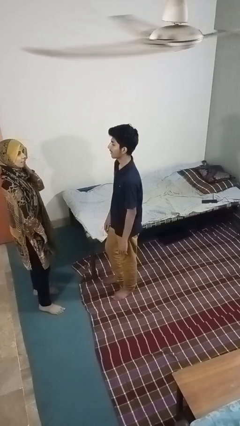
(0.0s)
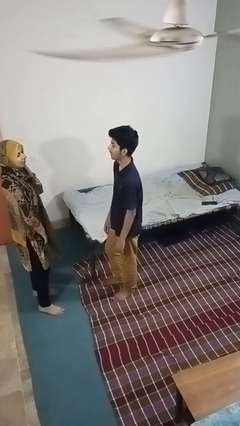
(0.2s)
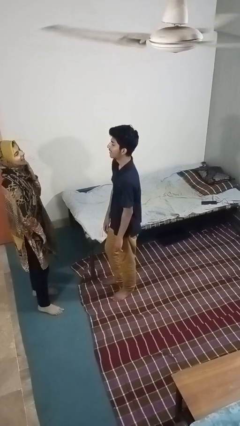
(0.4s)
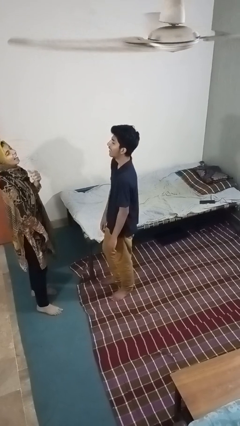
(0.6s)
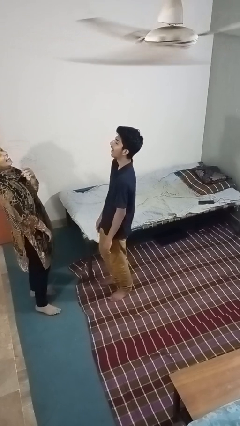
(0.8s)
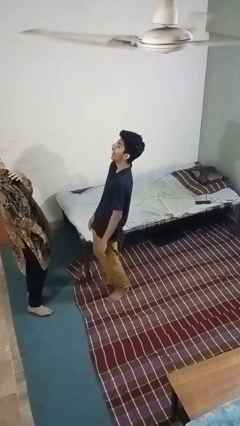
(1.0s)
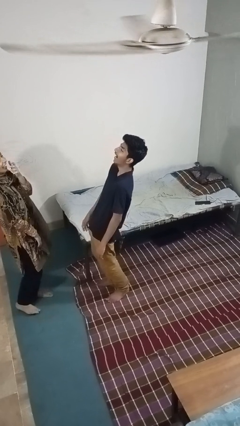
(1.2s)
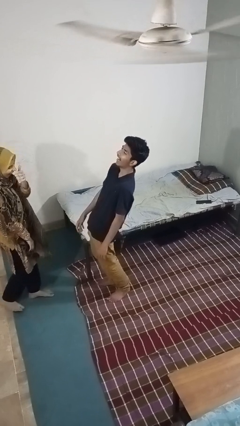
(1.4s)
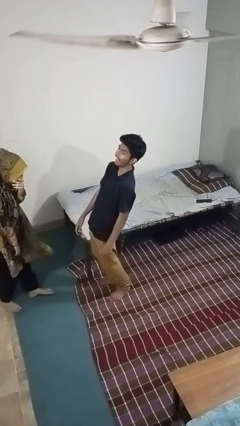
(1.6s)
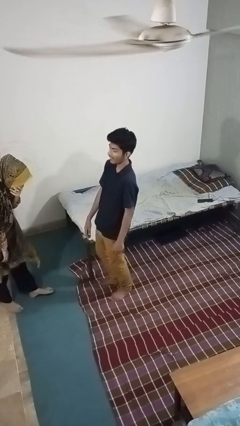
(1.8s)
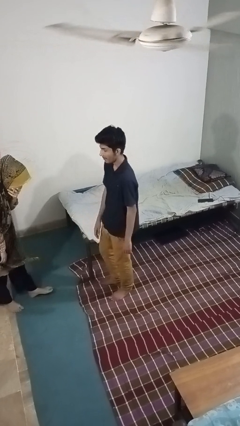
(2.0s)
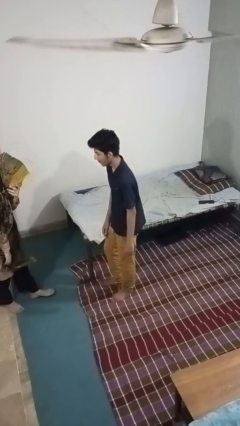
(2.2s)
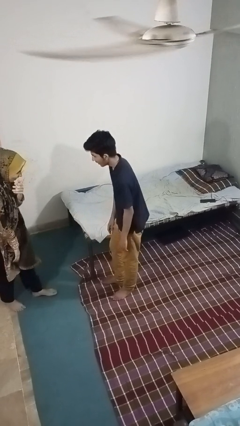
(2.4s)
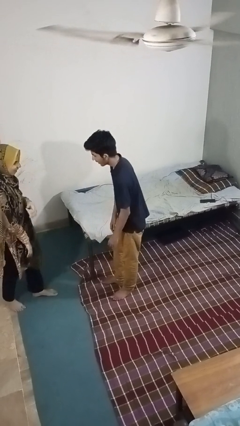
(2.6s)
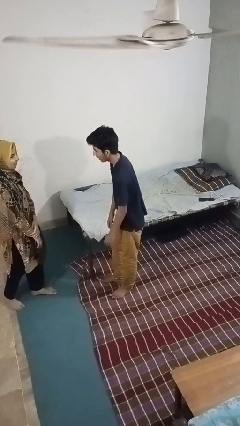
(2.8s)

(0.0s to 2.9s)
person laughs with person

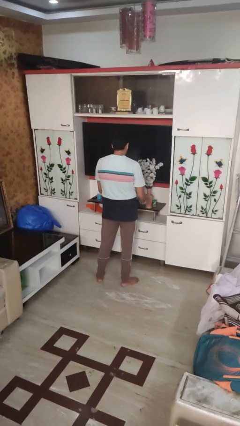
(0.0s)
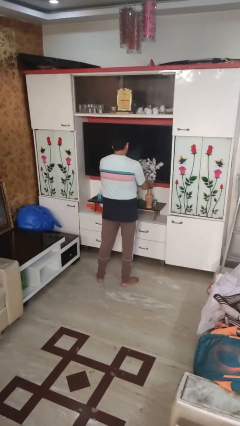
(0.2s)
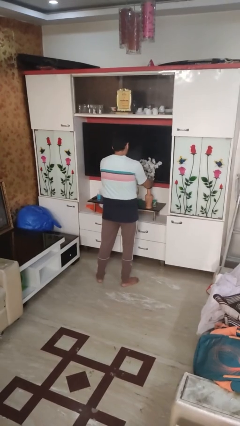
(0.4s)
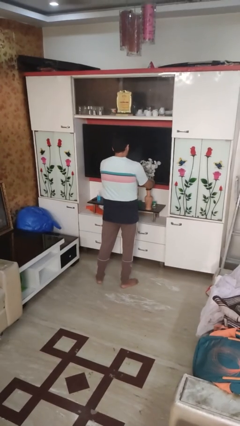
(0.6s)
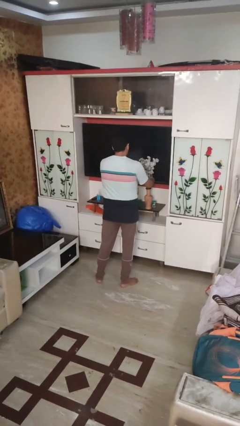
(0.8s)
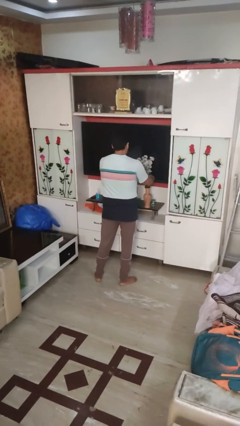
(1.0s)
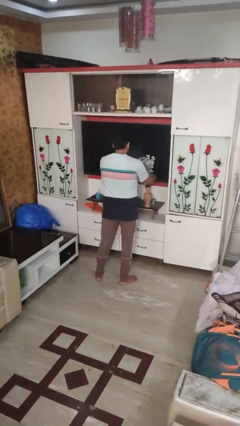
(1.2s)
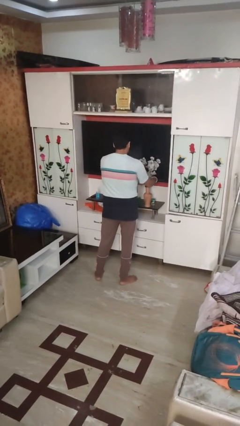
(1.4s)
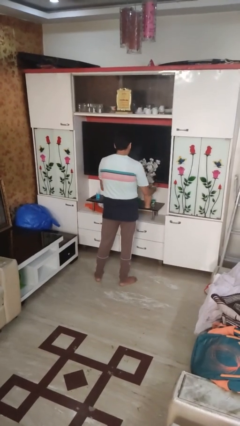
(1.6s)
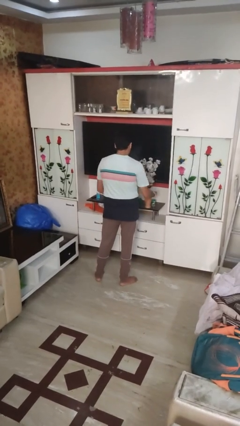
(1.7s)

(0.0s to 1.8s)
person arranges flowers in vase

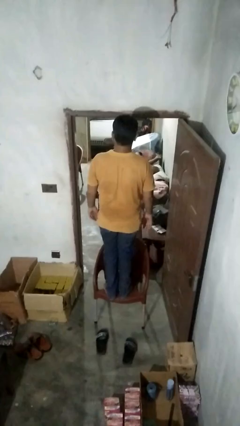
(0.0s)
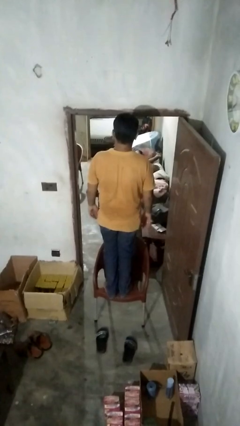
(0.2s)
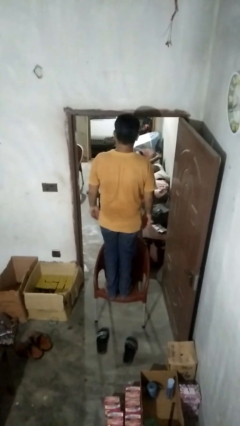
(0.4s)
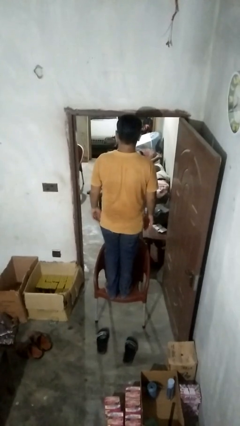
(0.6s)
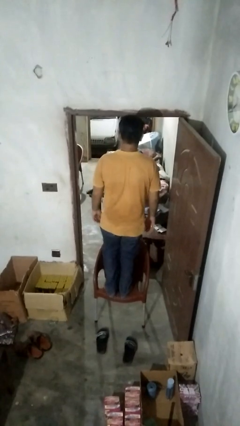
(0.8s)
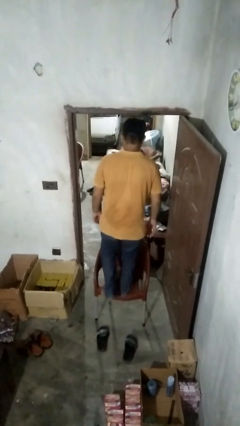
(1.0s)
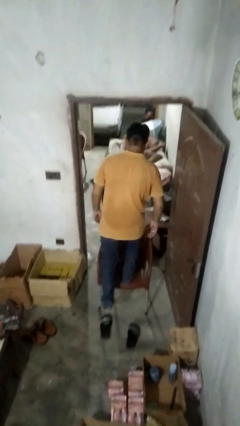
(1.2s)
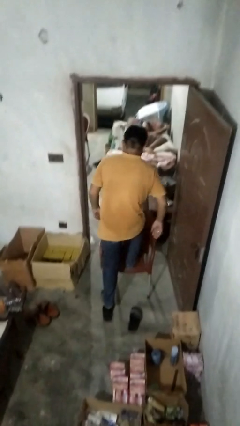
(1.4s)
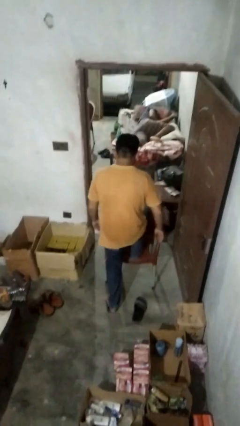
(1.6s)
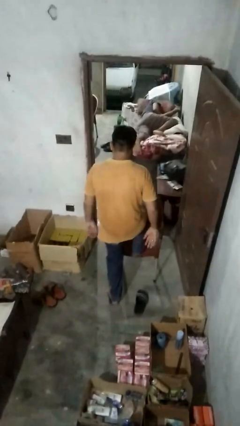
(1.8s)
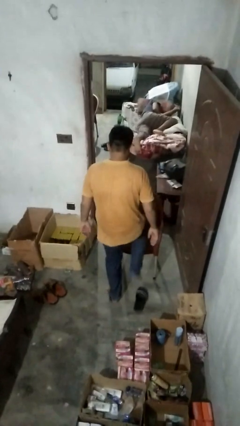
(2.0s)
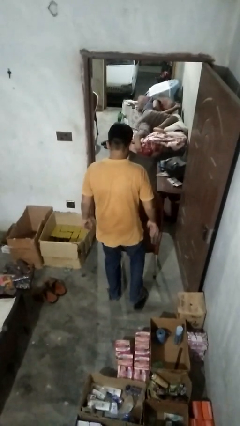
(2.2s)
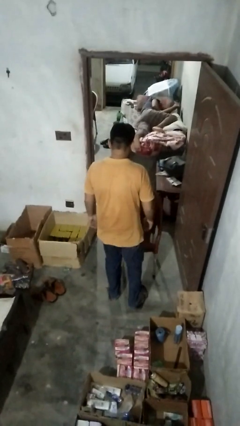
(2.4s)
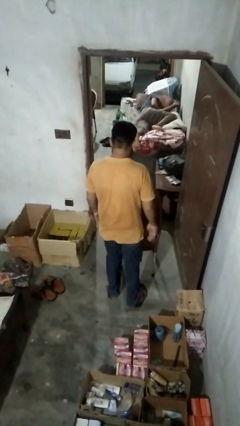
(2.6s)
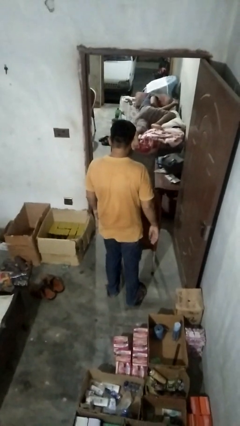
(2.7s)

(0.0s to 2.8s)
person climbs off chair

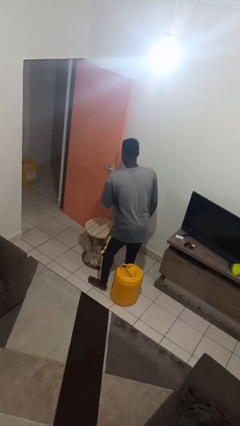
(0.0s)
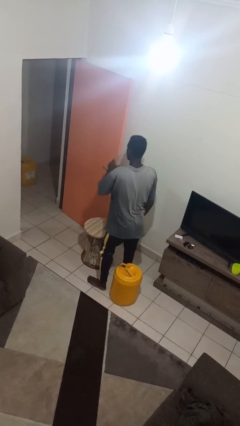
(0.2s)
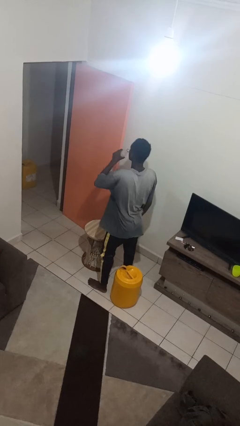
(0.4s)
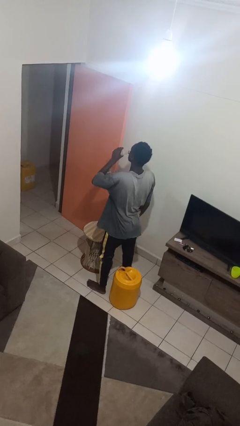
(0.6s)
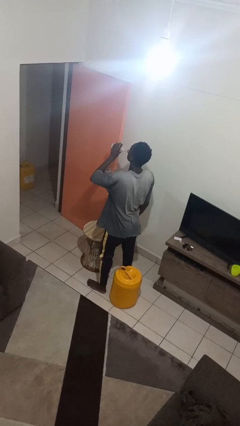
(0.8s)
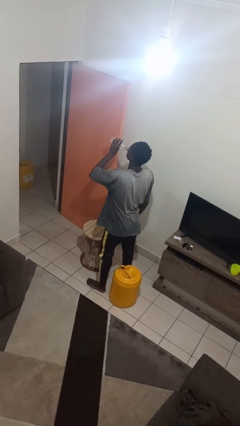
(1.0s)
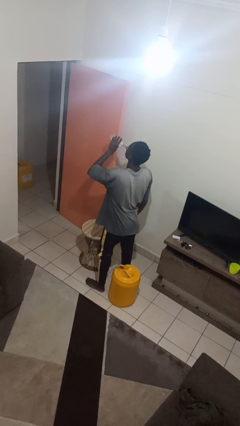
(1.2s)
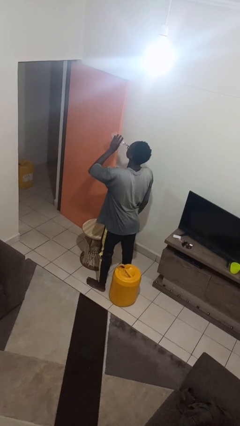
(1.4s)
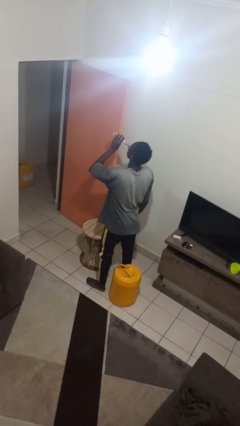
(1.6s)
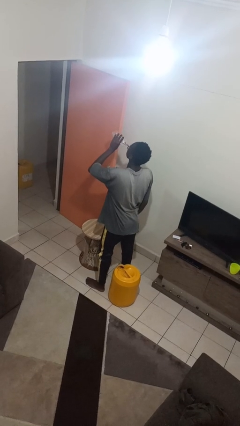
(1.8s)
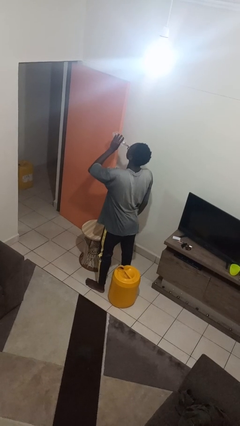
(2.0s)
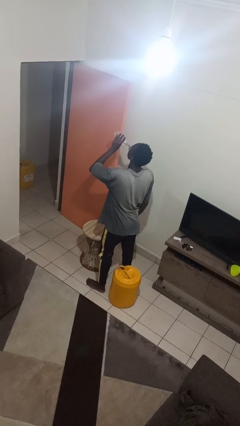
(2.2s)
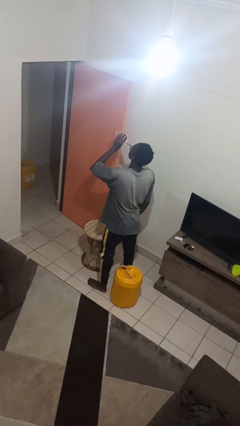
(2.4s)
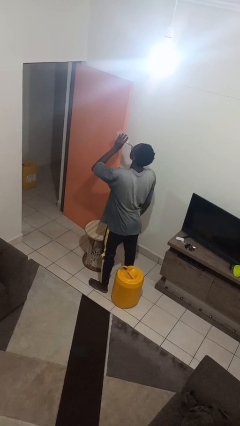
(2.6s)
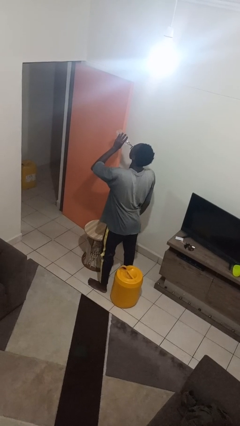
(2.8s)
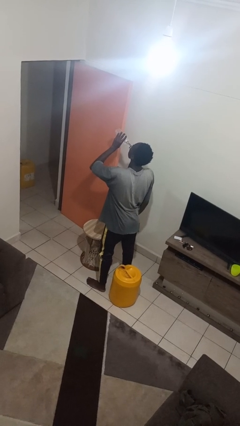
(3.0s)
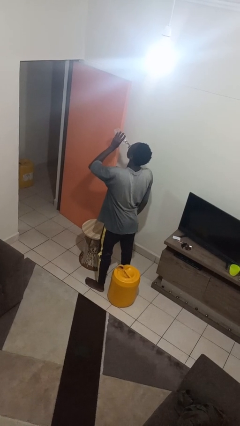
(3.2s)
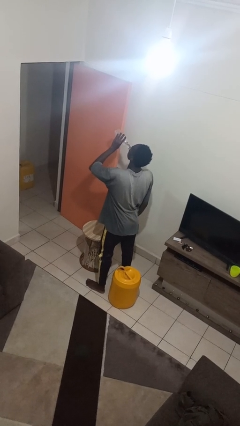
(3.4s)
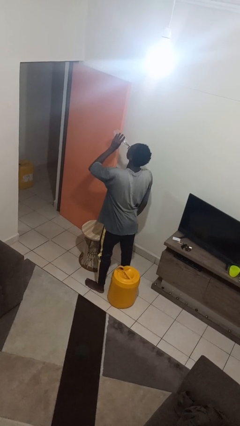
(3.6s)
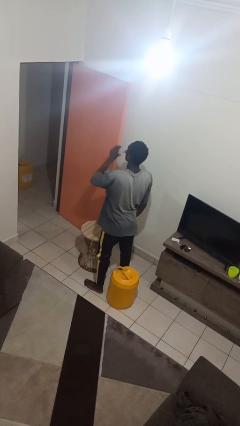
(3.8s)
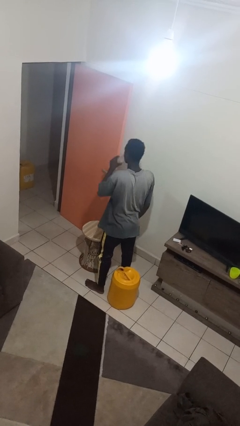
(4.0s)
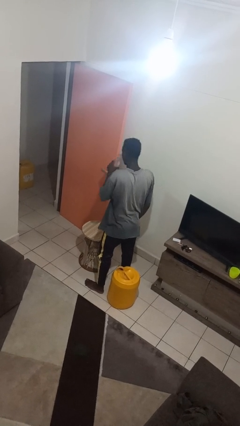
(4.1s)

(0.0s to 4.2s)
person drinks from bottle

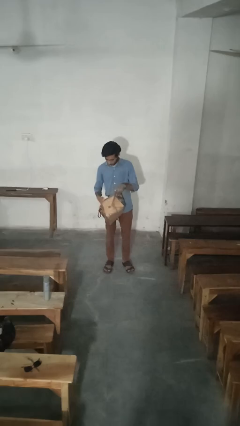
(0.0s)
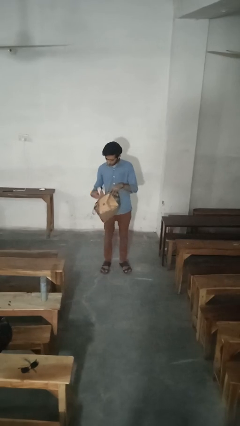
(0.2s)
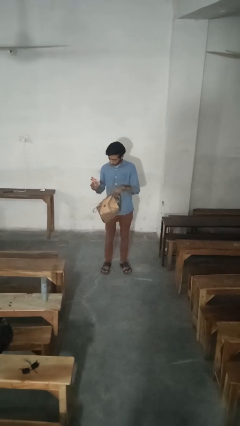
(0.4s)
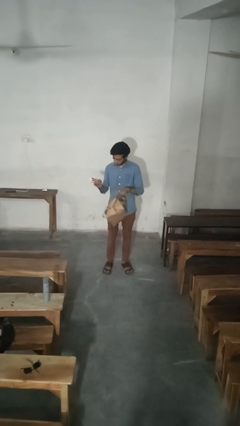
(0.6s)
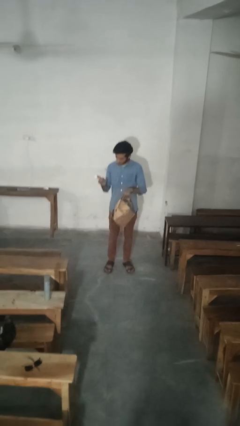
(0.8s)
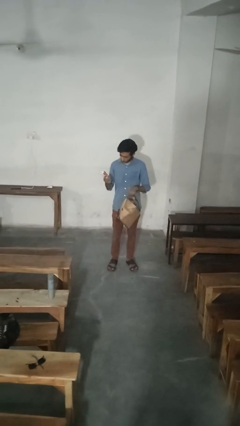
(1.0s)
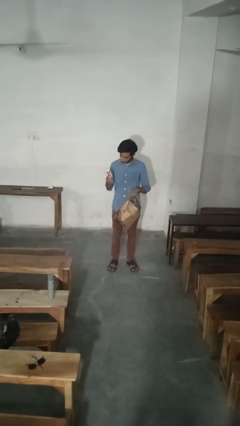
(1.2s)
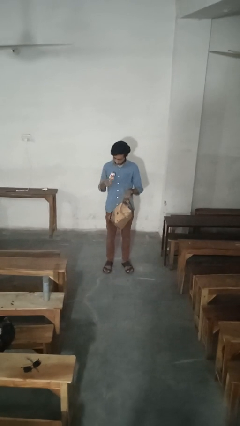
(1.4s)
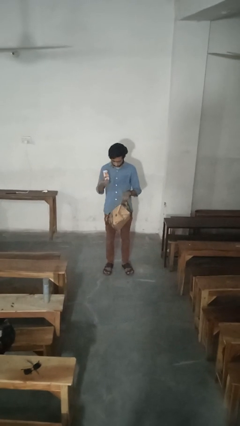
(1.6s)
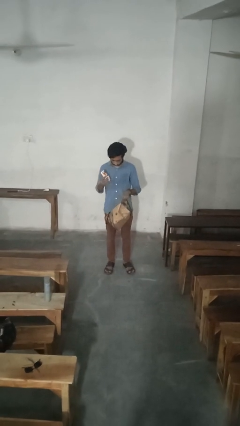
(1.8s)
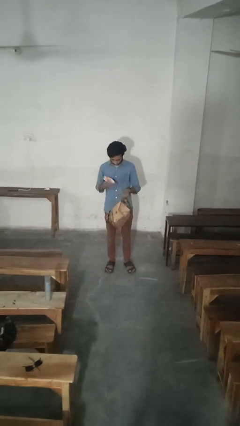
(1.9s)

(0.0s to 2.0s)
person takes object from purse

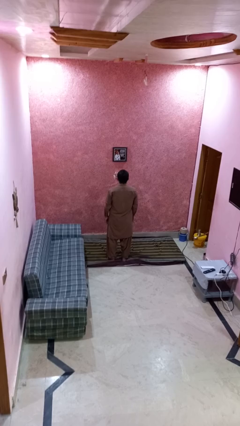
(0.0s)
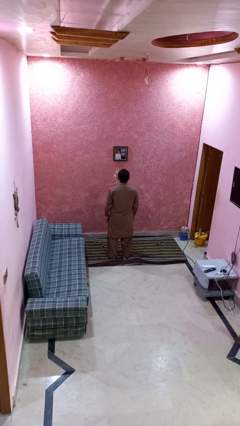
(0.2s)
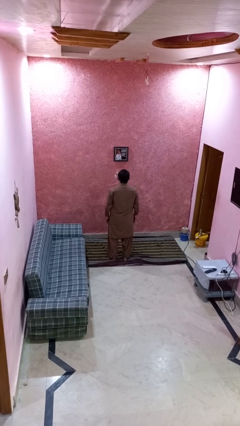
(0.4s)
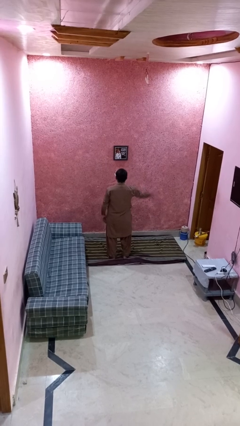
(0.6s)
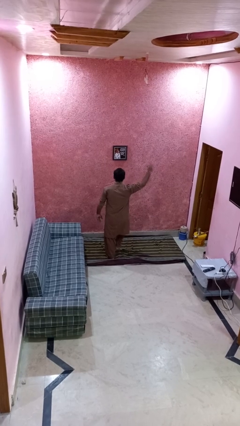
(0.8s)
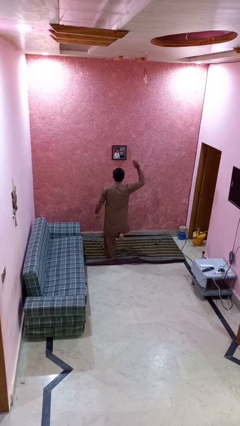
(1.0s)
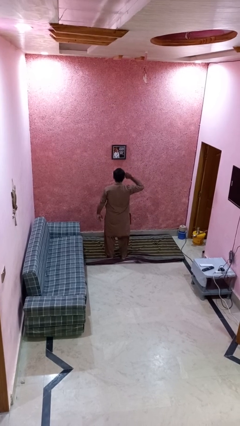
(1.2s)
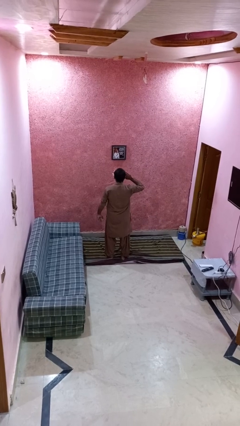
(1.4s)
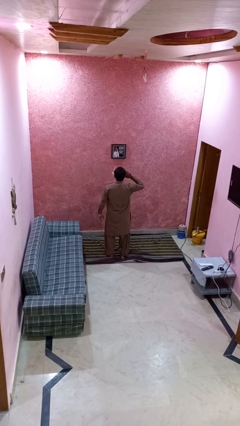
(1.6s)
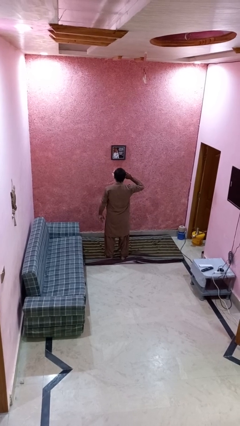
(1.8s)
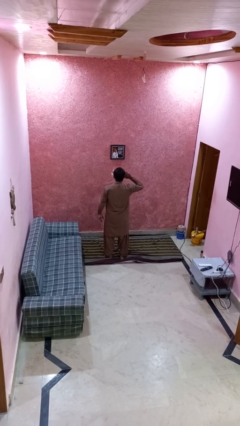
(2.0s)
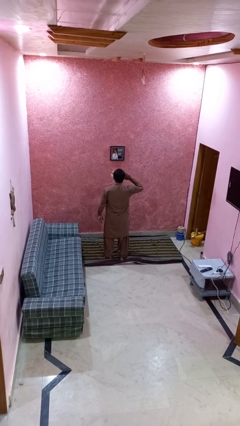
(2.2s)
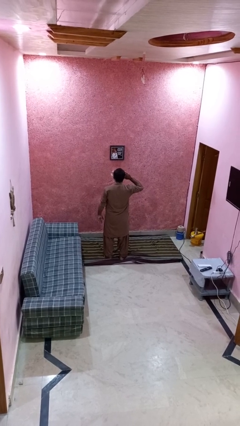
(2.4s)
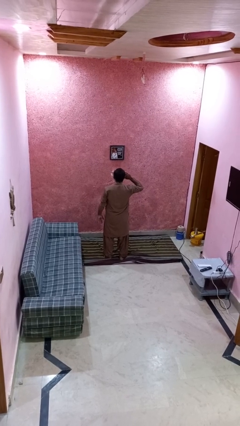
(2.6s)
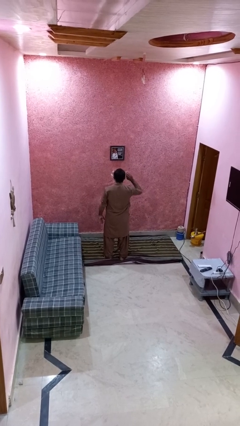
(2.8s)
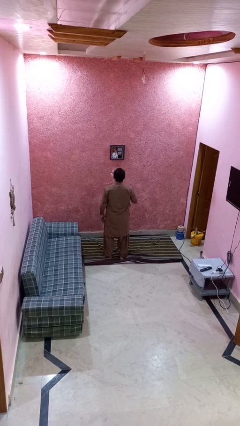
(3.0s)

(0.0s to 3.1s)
person salutes

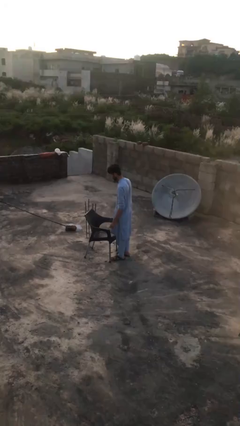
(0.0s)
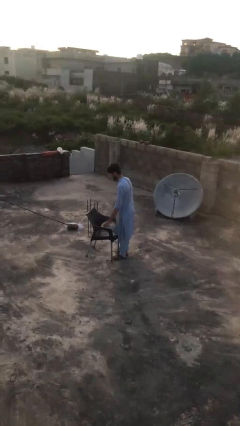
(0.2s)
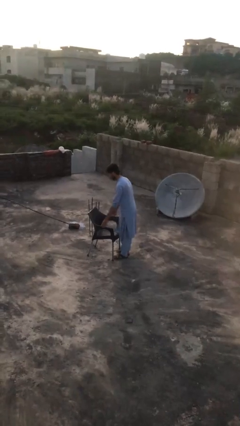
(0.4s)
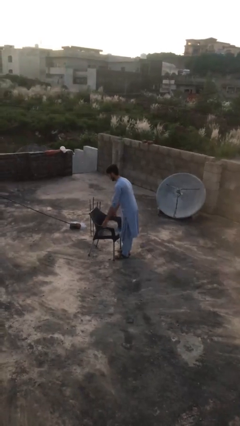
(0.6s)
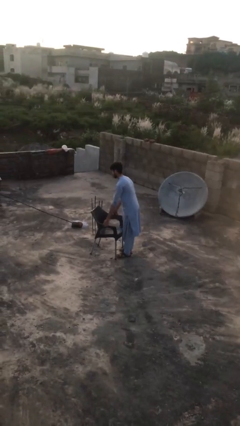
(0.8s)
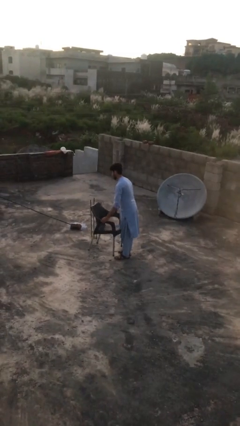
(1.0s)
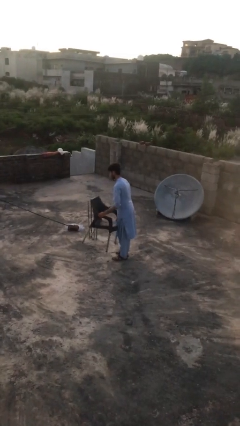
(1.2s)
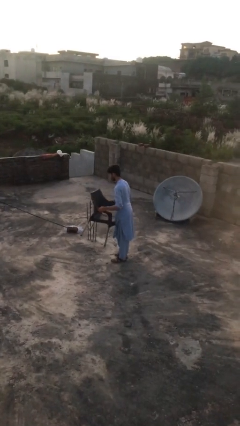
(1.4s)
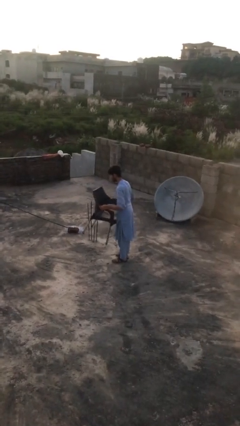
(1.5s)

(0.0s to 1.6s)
person picks up object from floor
